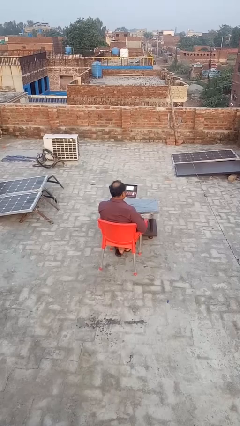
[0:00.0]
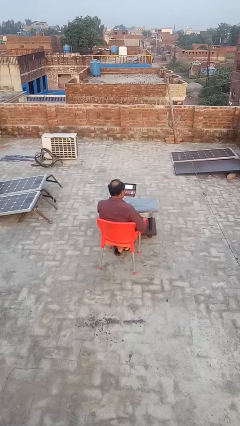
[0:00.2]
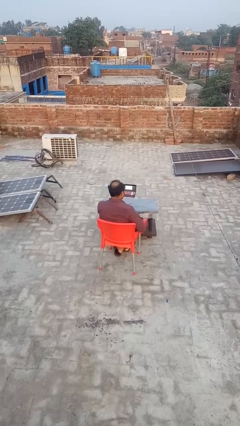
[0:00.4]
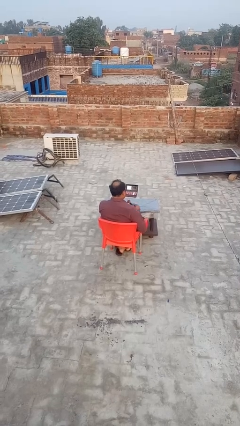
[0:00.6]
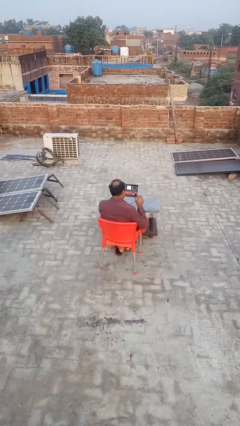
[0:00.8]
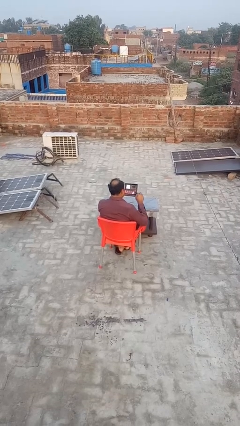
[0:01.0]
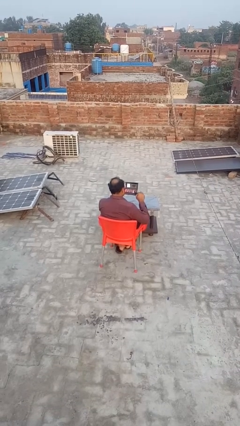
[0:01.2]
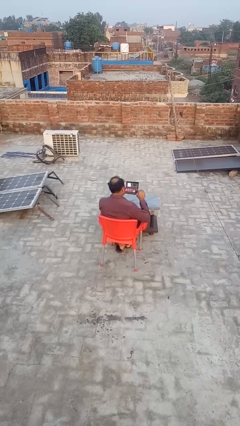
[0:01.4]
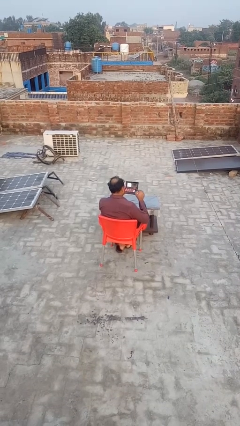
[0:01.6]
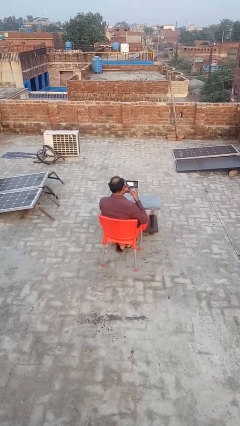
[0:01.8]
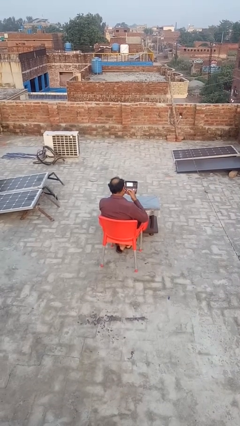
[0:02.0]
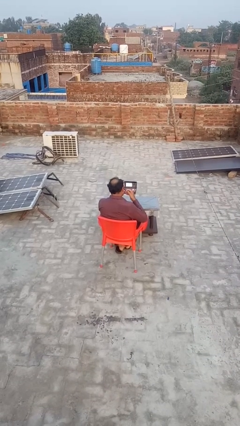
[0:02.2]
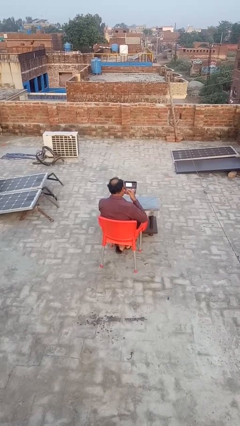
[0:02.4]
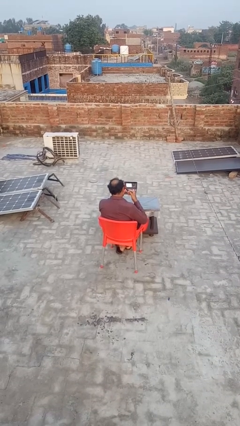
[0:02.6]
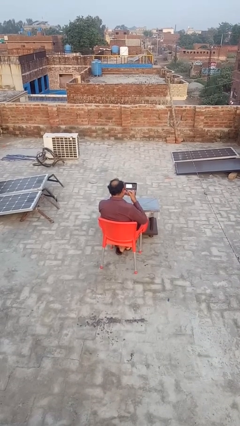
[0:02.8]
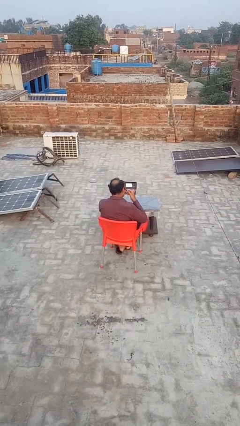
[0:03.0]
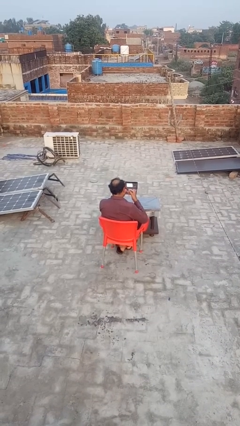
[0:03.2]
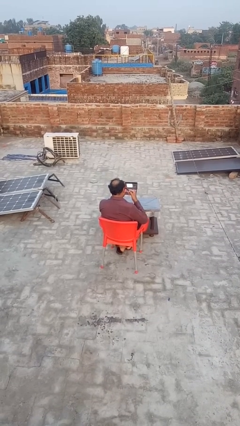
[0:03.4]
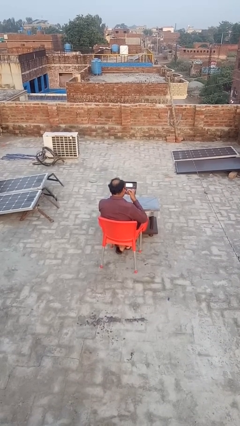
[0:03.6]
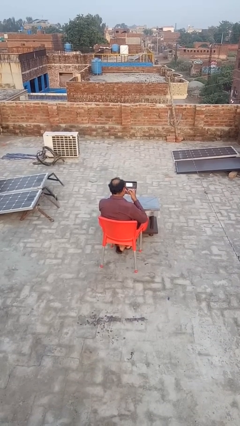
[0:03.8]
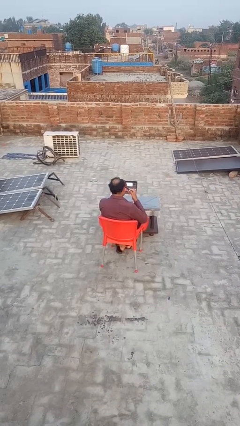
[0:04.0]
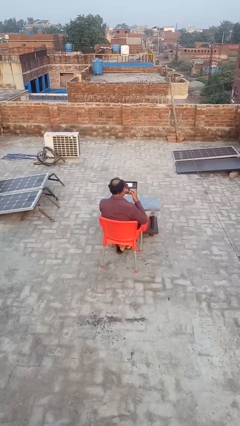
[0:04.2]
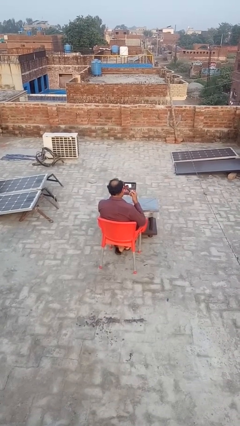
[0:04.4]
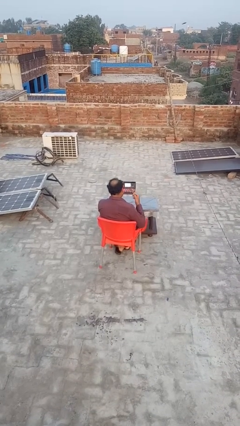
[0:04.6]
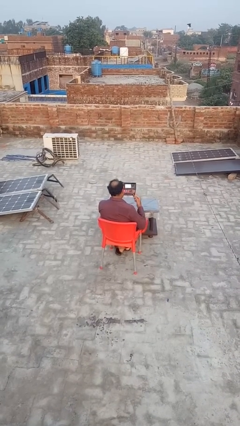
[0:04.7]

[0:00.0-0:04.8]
person applies eye makeup

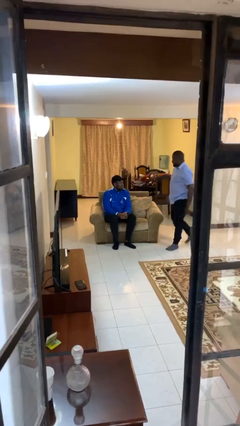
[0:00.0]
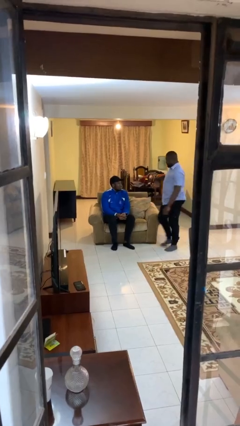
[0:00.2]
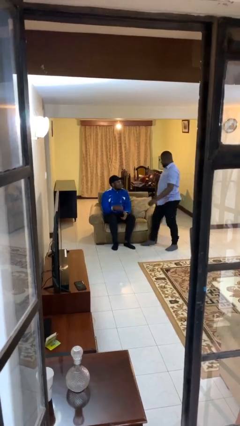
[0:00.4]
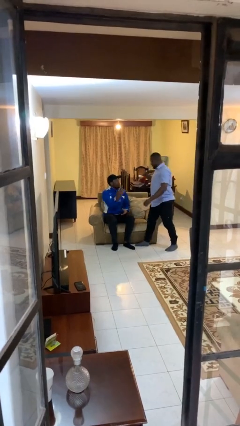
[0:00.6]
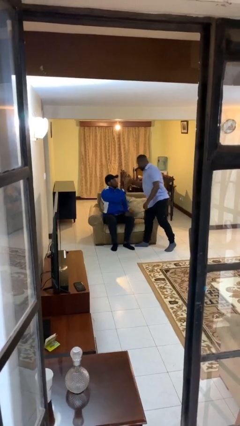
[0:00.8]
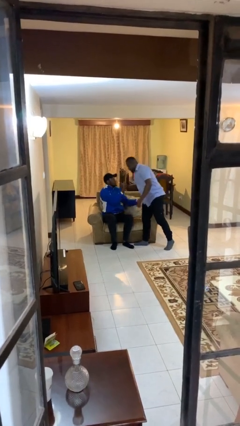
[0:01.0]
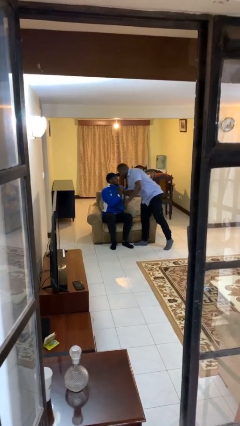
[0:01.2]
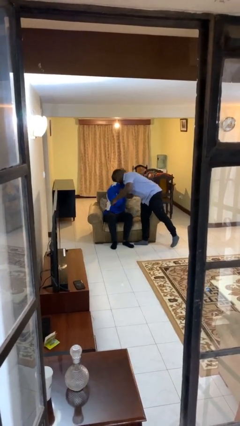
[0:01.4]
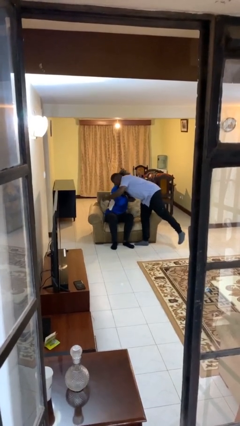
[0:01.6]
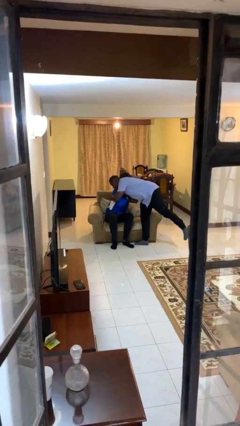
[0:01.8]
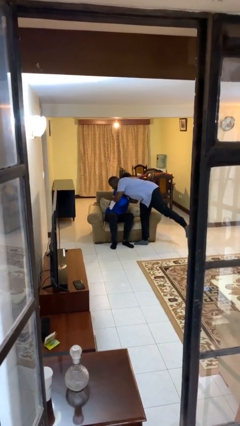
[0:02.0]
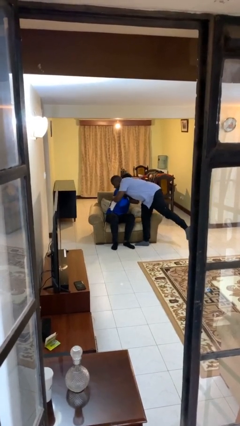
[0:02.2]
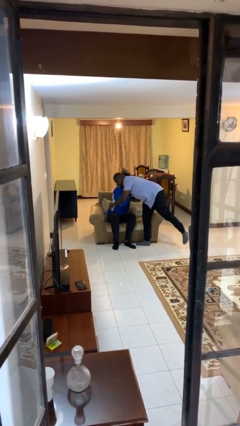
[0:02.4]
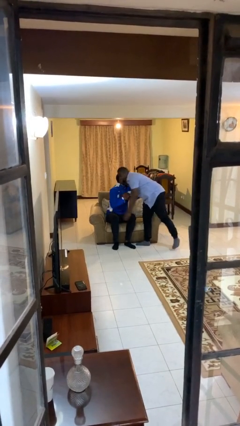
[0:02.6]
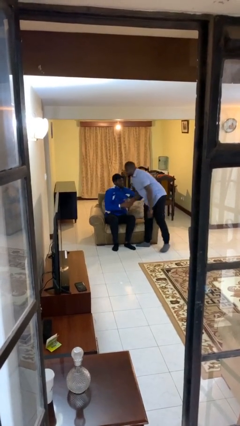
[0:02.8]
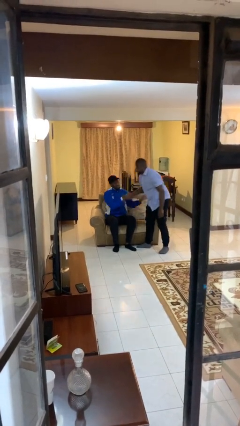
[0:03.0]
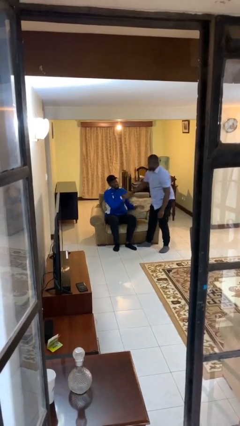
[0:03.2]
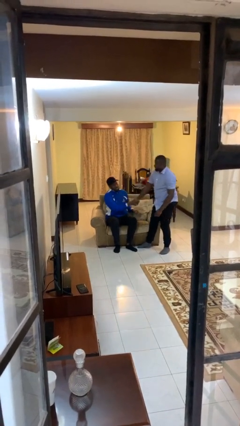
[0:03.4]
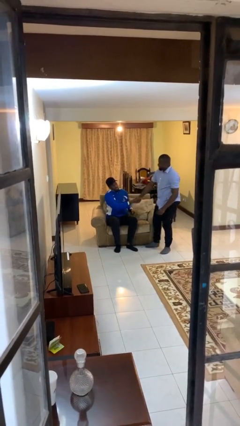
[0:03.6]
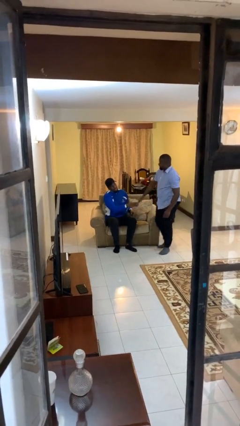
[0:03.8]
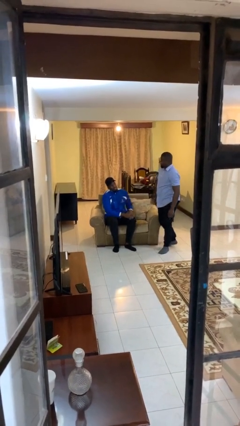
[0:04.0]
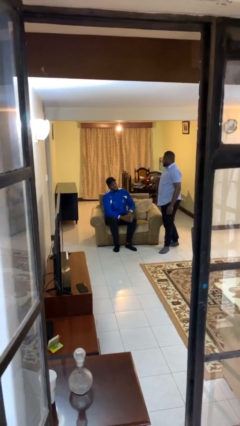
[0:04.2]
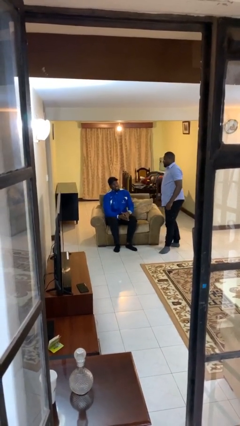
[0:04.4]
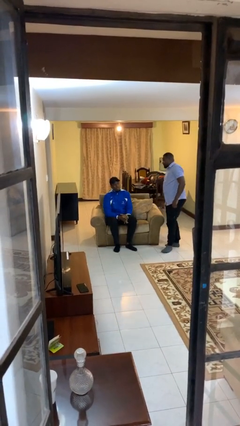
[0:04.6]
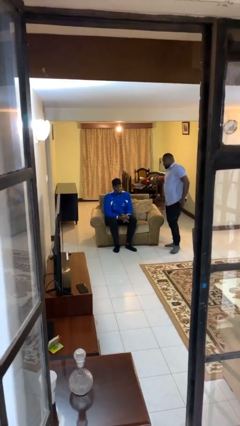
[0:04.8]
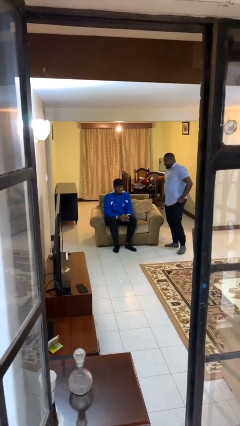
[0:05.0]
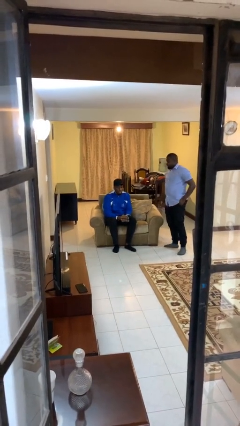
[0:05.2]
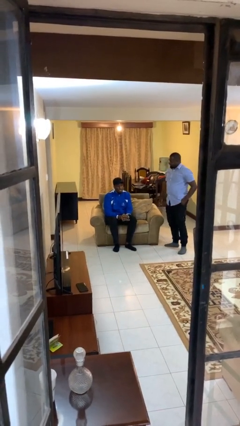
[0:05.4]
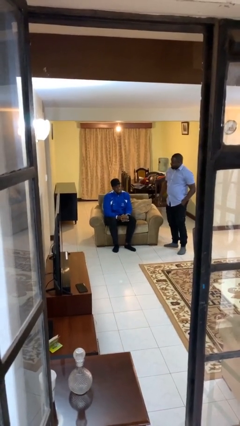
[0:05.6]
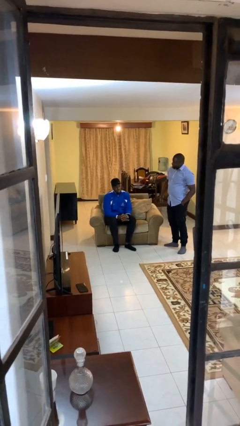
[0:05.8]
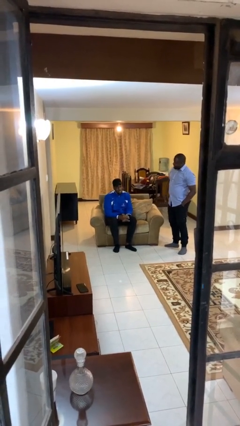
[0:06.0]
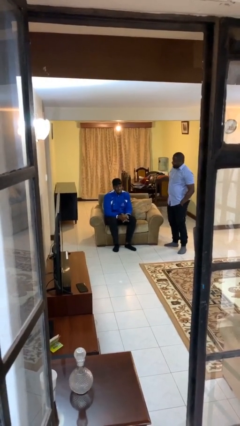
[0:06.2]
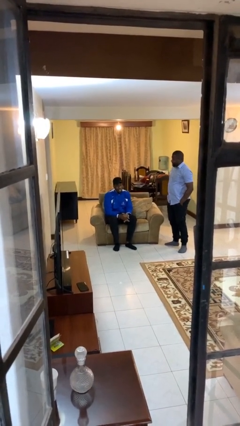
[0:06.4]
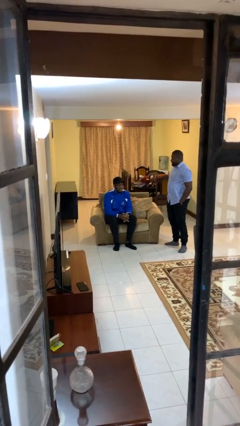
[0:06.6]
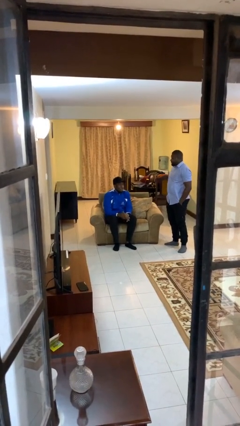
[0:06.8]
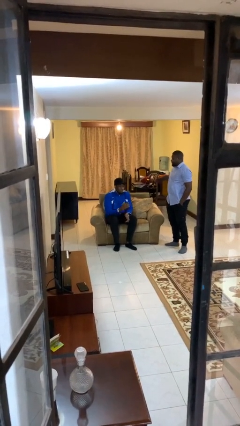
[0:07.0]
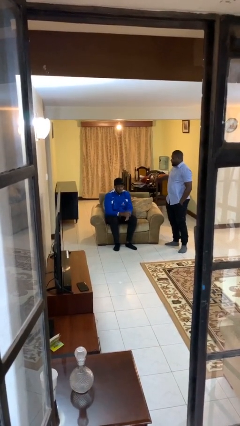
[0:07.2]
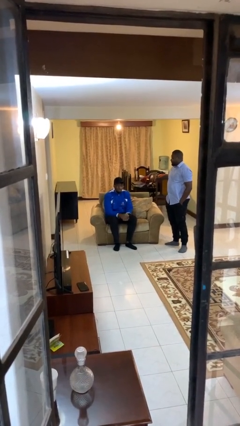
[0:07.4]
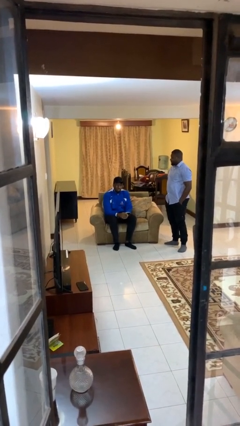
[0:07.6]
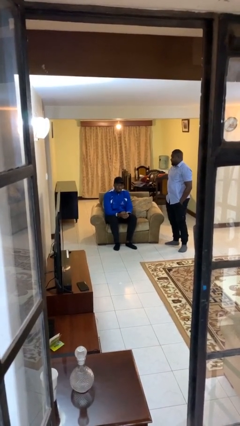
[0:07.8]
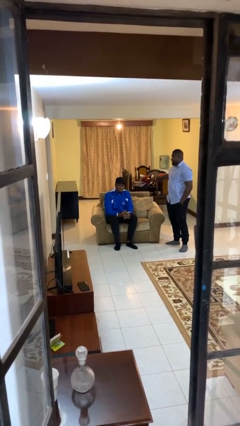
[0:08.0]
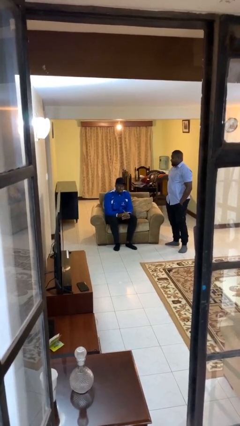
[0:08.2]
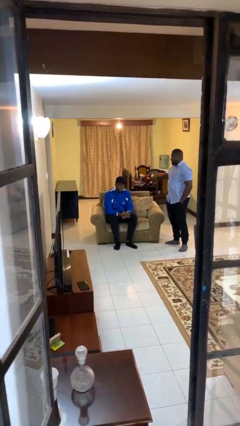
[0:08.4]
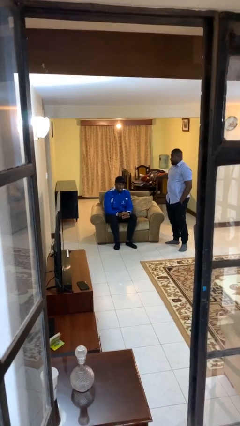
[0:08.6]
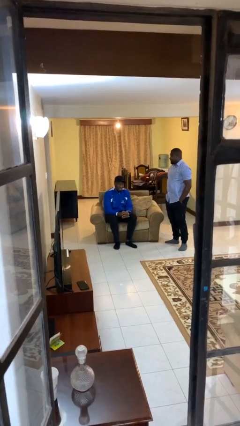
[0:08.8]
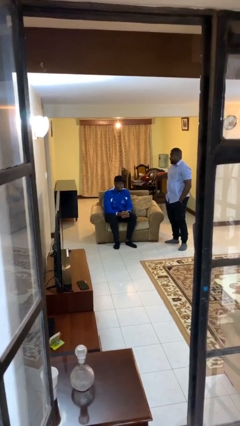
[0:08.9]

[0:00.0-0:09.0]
person embraces person

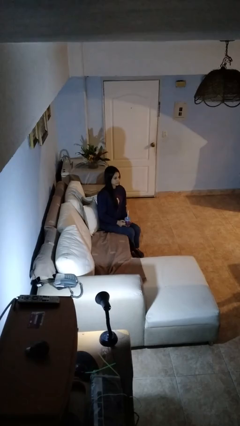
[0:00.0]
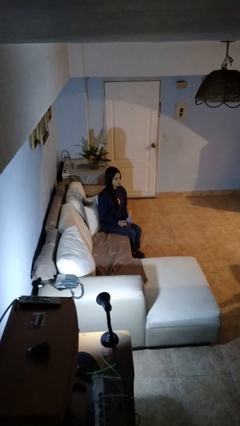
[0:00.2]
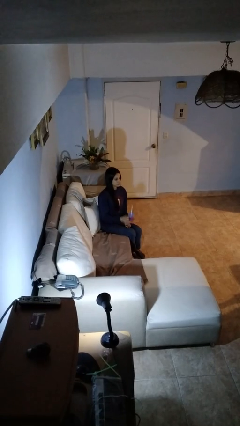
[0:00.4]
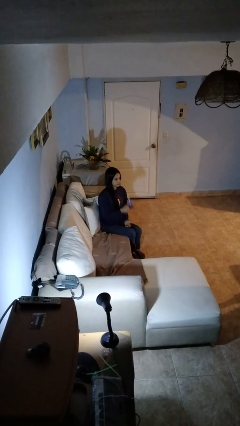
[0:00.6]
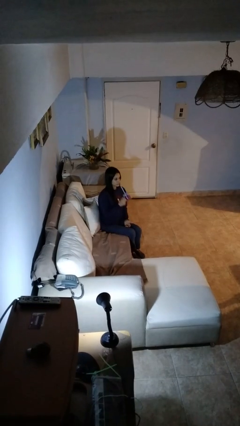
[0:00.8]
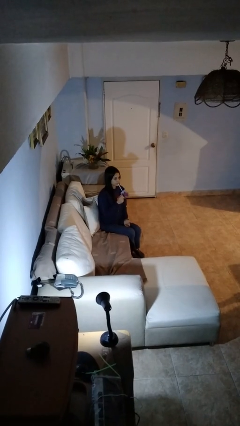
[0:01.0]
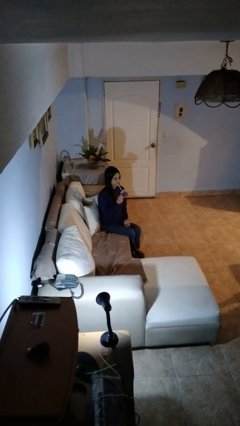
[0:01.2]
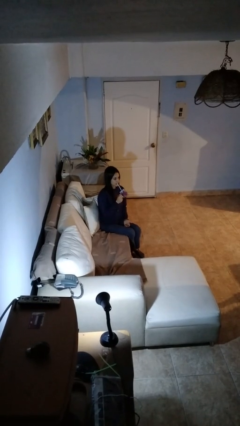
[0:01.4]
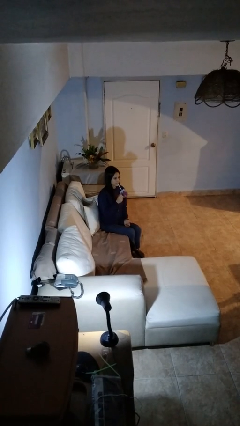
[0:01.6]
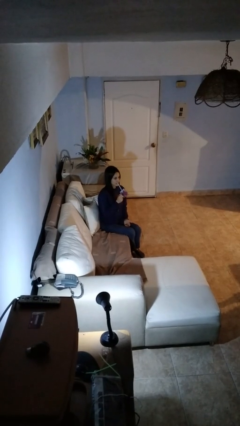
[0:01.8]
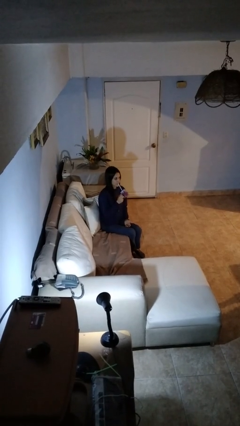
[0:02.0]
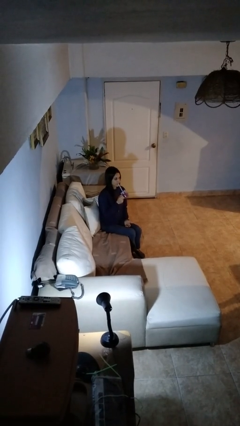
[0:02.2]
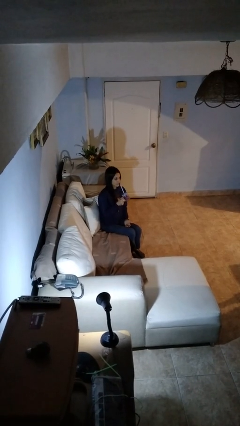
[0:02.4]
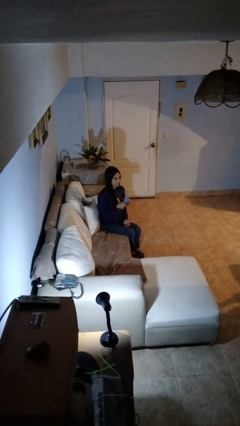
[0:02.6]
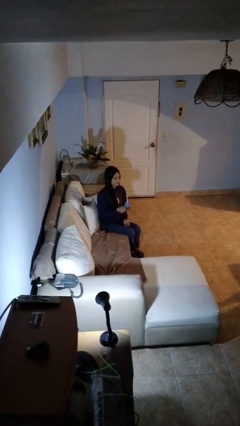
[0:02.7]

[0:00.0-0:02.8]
person drinks from straw

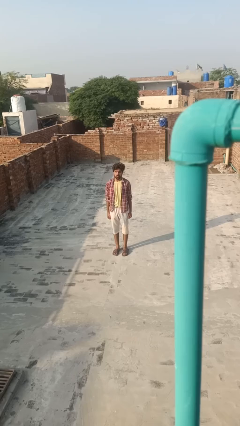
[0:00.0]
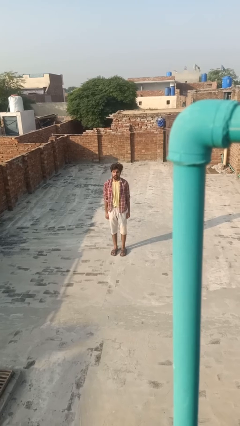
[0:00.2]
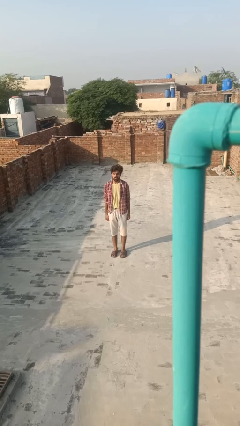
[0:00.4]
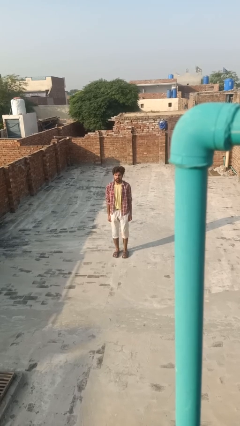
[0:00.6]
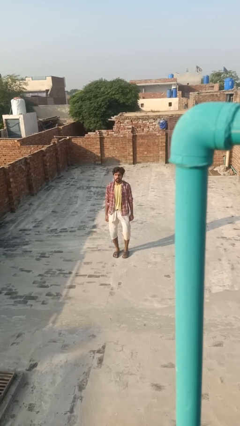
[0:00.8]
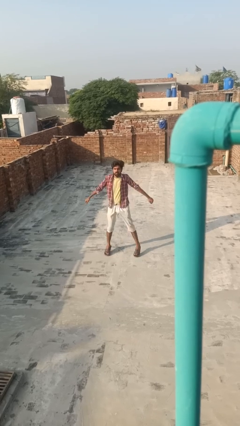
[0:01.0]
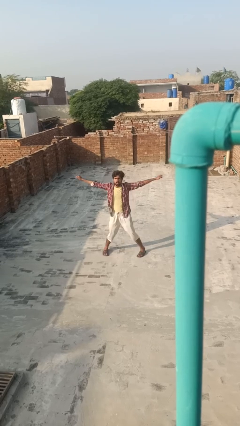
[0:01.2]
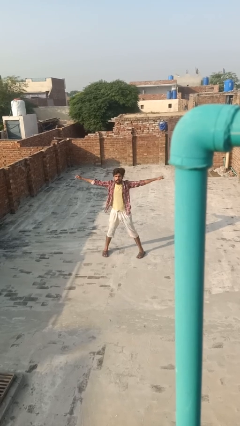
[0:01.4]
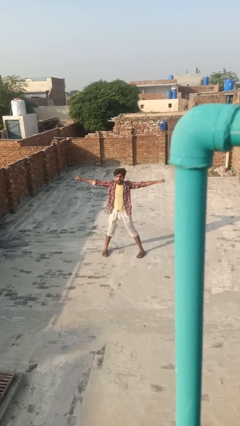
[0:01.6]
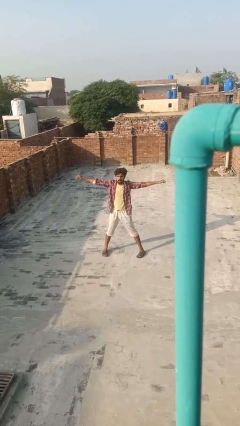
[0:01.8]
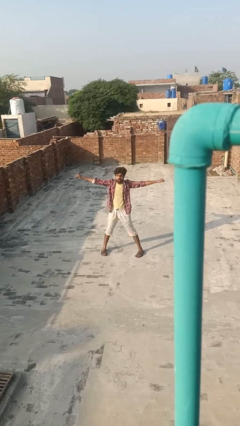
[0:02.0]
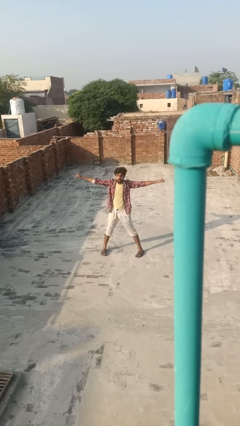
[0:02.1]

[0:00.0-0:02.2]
person exercises with jumping jacks
